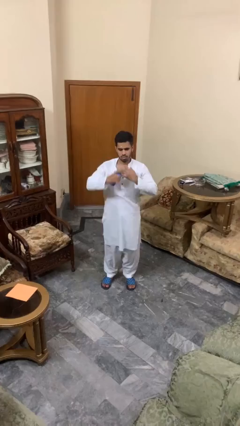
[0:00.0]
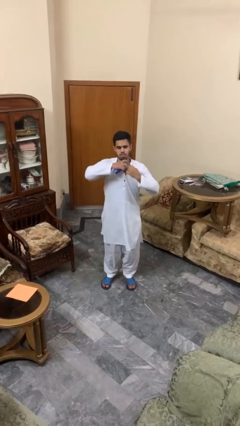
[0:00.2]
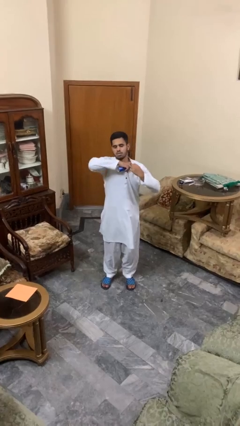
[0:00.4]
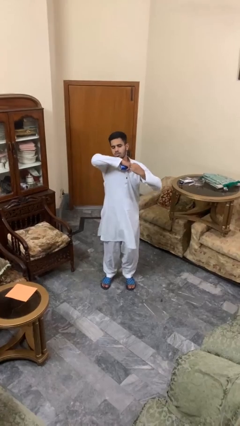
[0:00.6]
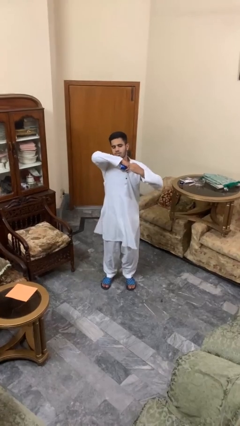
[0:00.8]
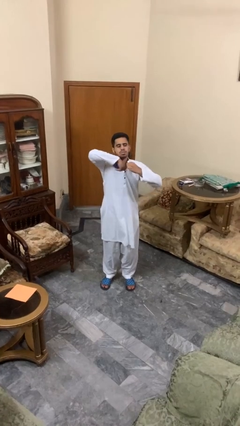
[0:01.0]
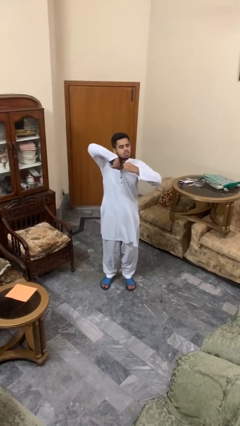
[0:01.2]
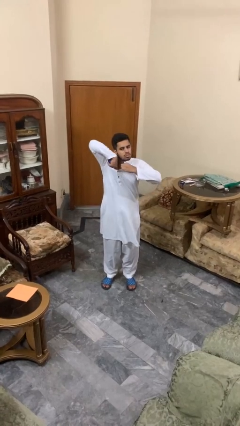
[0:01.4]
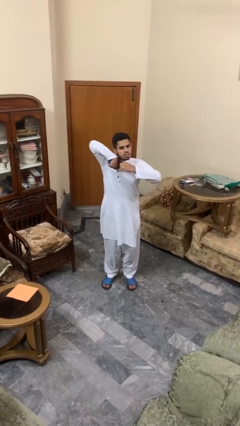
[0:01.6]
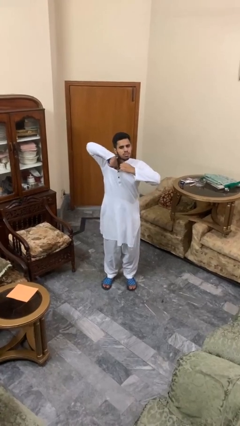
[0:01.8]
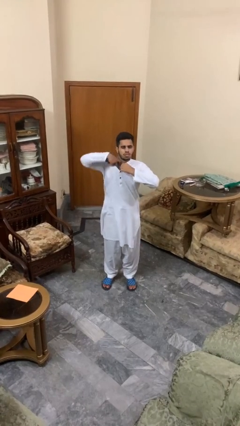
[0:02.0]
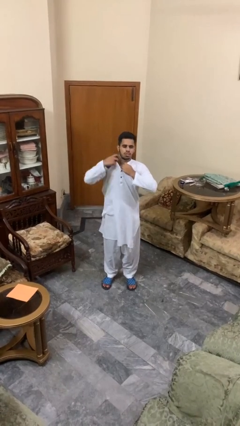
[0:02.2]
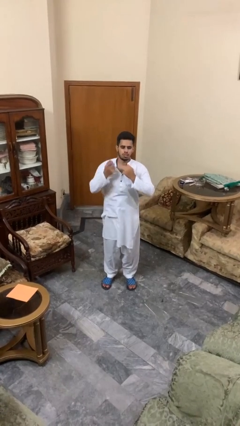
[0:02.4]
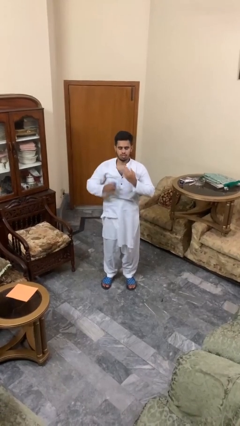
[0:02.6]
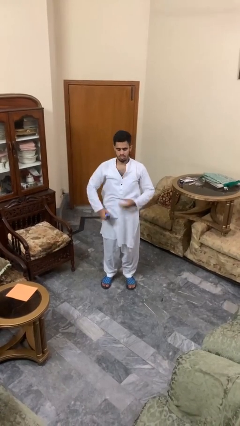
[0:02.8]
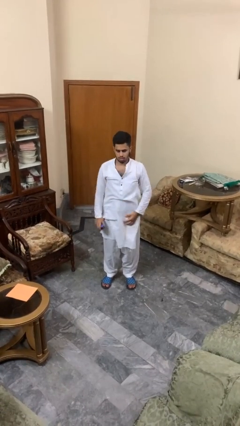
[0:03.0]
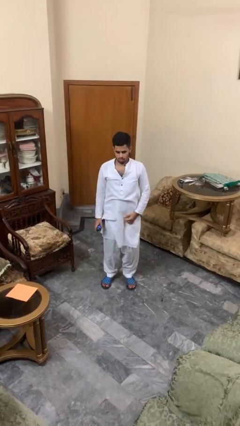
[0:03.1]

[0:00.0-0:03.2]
person applies deodorant

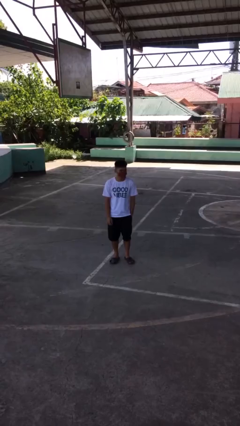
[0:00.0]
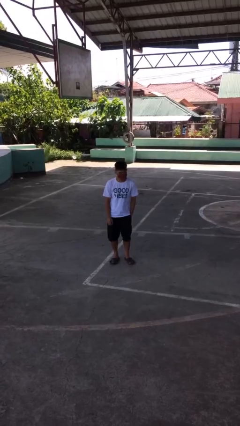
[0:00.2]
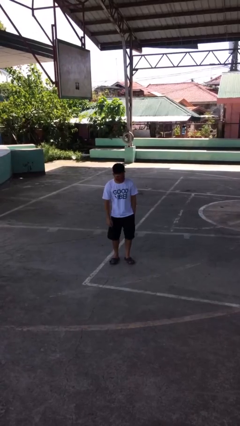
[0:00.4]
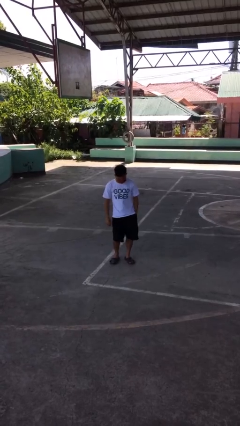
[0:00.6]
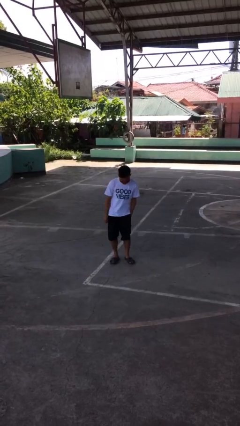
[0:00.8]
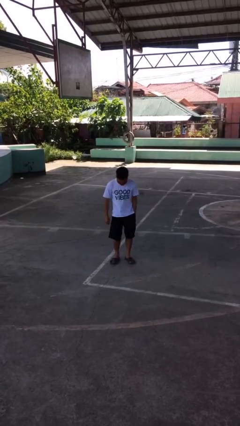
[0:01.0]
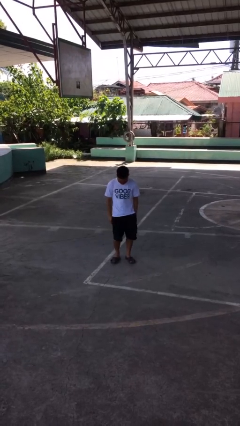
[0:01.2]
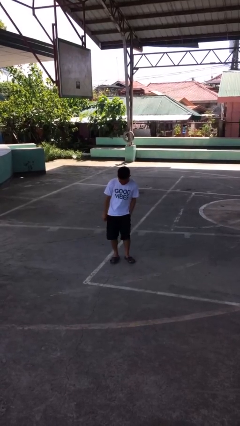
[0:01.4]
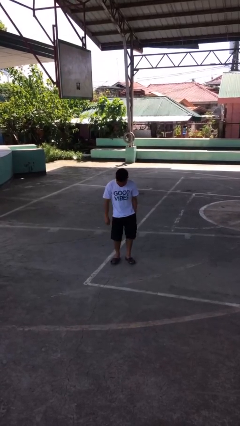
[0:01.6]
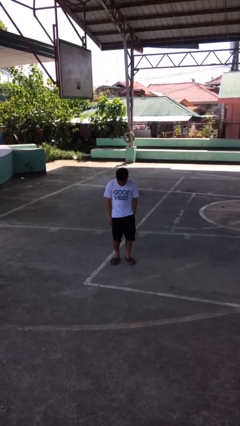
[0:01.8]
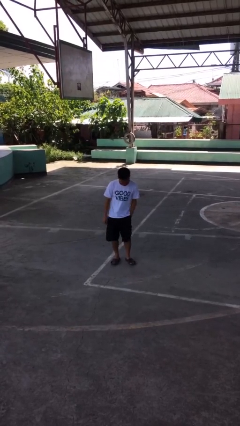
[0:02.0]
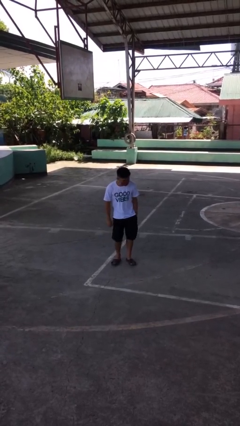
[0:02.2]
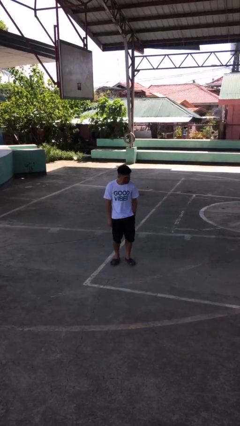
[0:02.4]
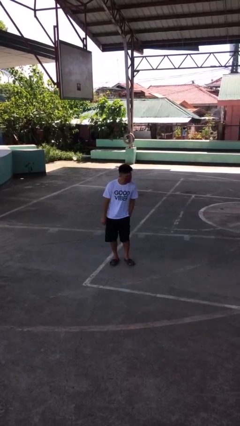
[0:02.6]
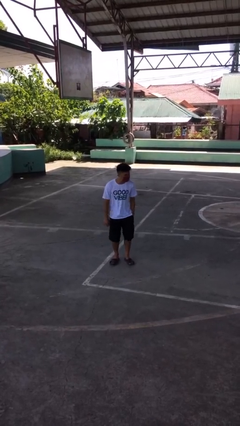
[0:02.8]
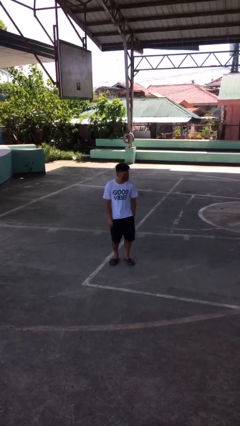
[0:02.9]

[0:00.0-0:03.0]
person wiggles hips

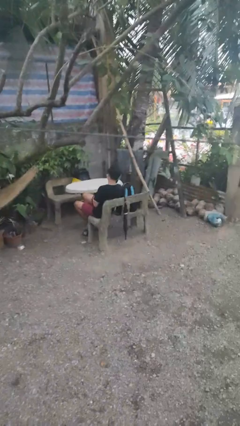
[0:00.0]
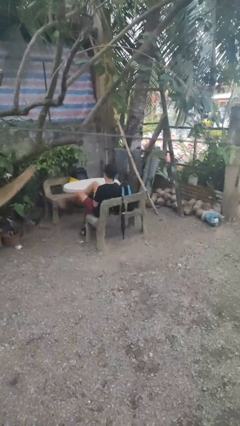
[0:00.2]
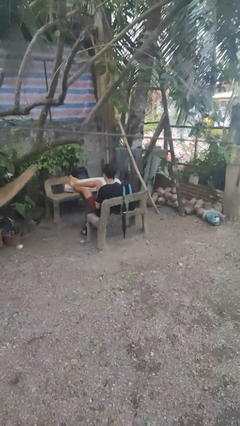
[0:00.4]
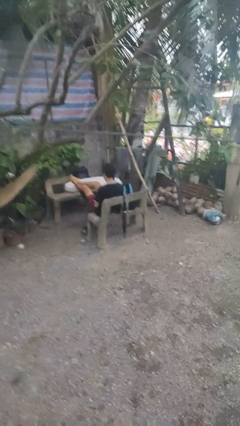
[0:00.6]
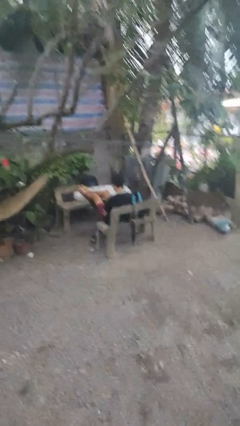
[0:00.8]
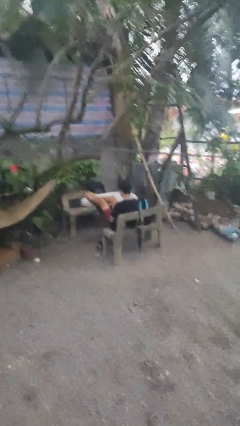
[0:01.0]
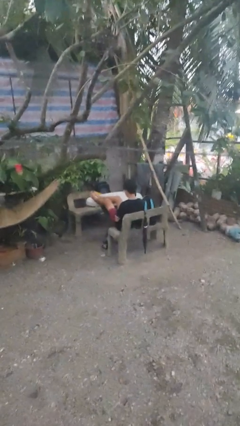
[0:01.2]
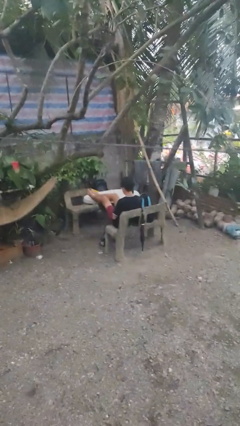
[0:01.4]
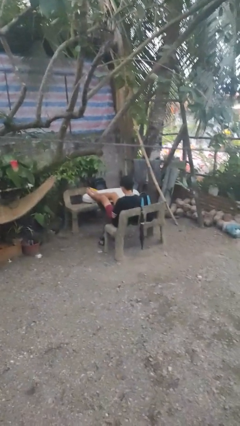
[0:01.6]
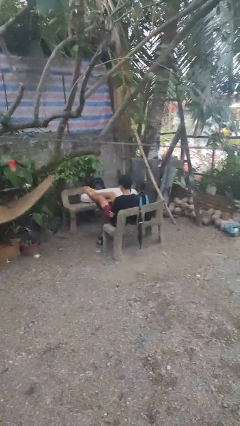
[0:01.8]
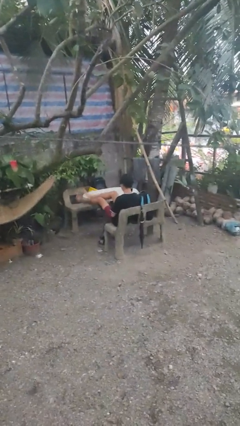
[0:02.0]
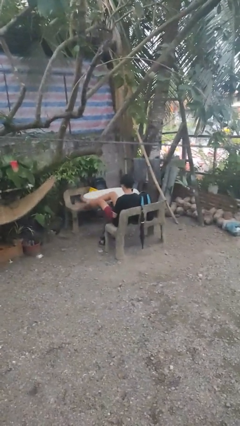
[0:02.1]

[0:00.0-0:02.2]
person puts feet up

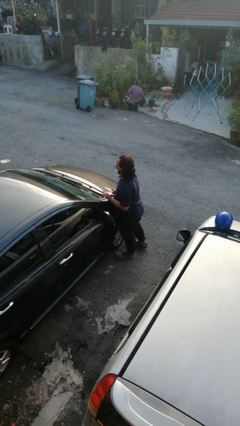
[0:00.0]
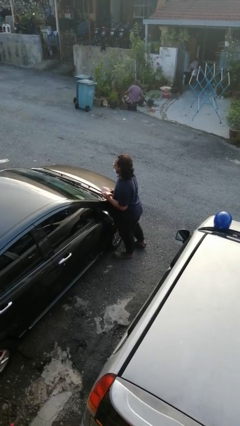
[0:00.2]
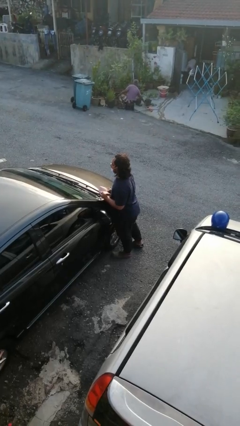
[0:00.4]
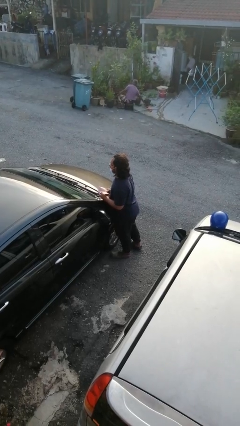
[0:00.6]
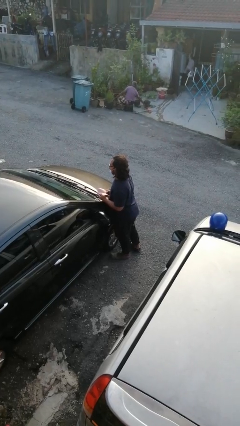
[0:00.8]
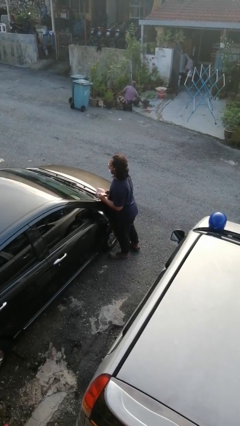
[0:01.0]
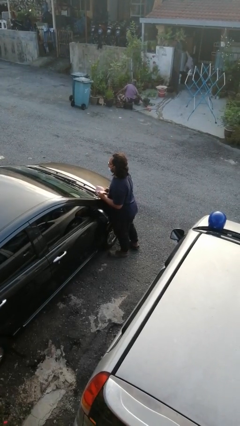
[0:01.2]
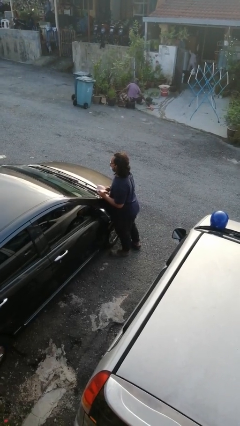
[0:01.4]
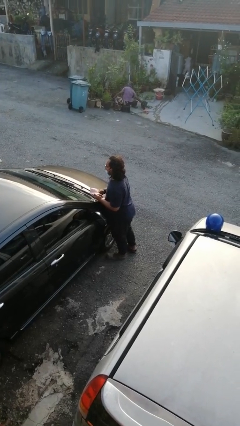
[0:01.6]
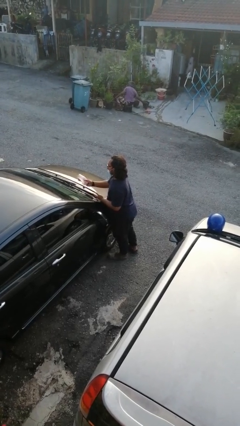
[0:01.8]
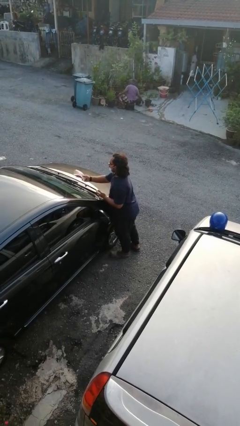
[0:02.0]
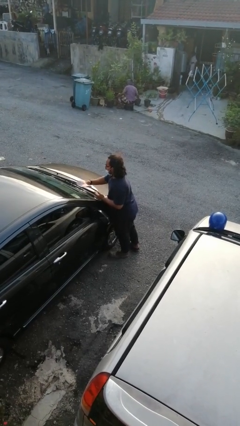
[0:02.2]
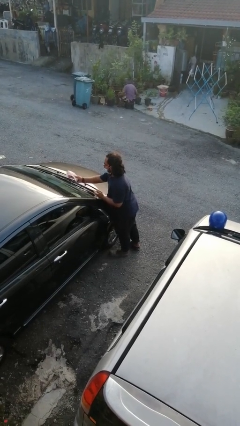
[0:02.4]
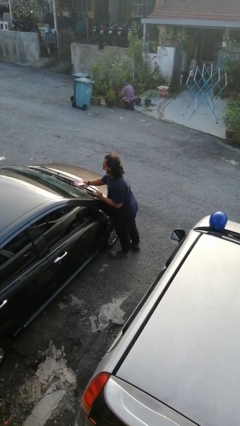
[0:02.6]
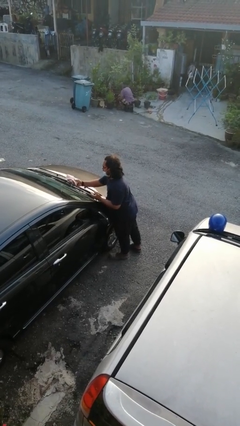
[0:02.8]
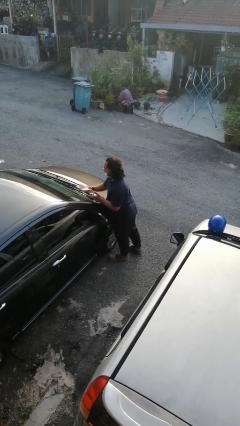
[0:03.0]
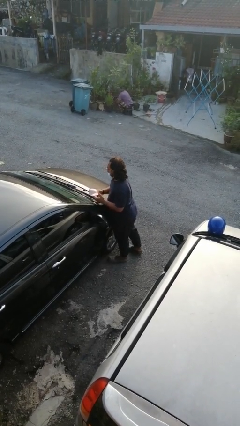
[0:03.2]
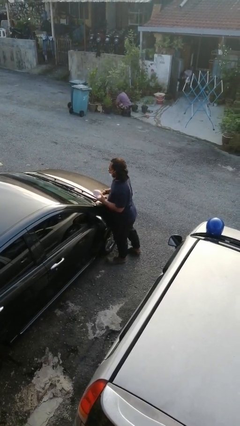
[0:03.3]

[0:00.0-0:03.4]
person polishes car with rag

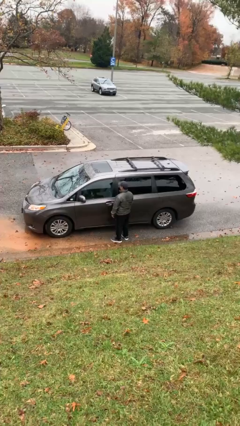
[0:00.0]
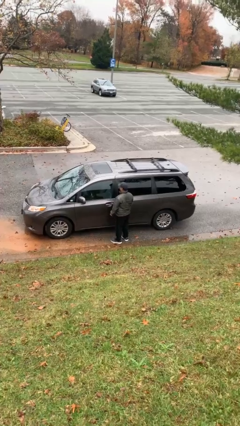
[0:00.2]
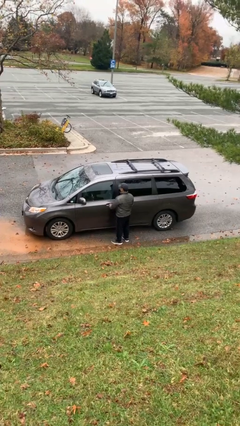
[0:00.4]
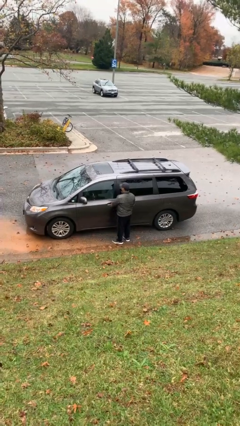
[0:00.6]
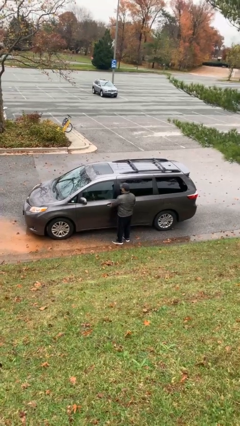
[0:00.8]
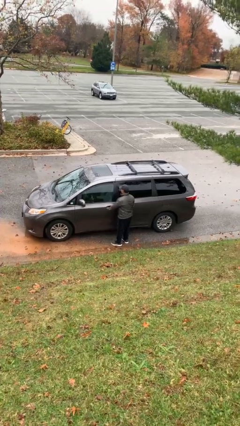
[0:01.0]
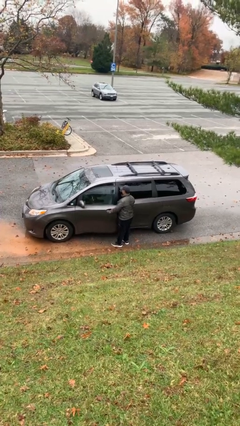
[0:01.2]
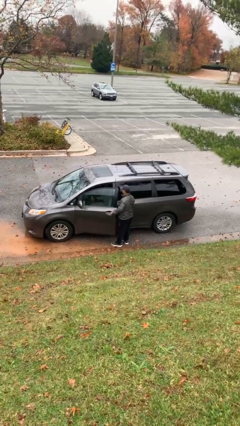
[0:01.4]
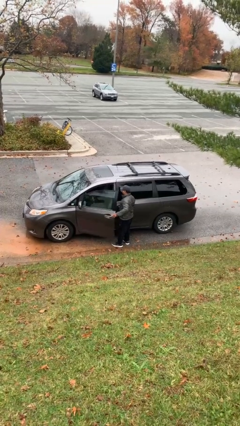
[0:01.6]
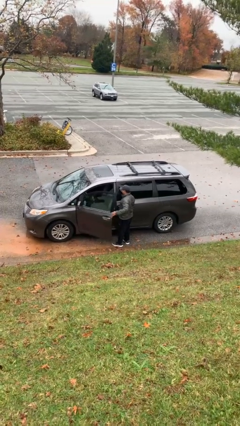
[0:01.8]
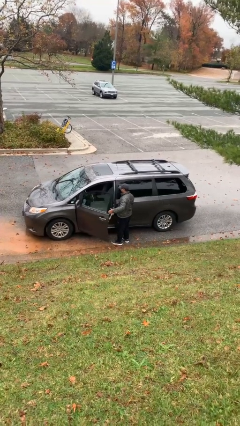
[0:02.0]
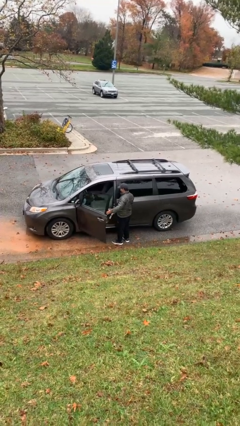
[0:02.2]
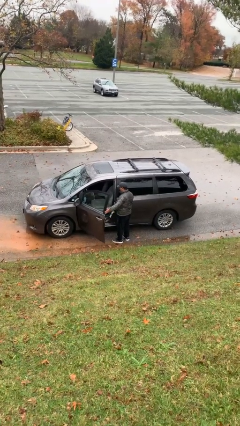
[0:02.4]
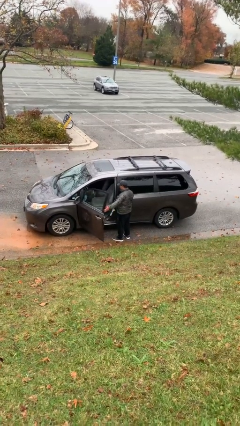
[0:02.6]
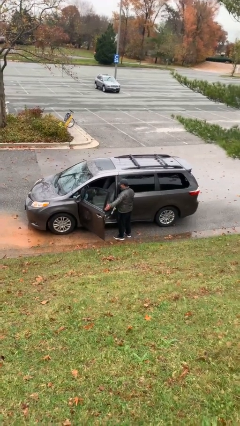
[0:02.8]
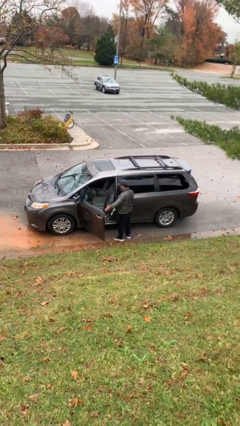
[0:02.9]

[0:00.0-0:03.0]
person opens car door

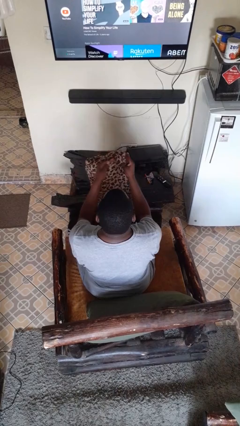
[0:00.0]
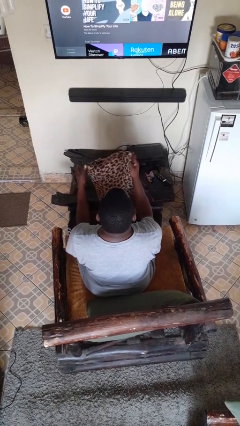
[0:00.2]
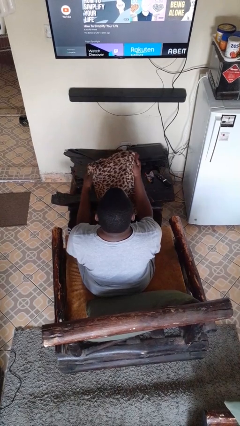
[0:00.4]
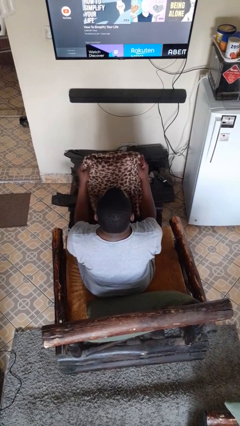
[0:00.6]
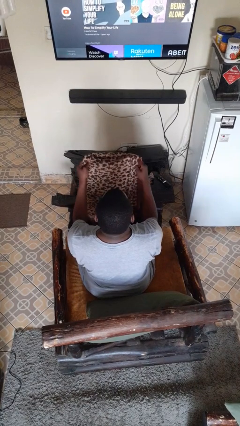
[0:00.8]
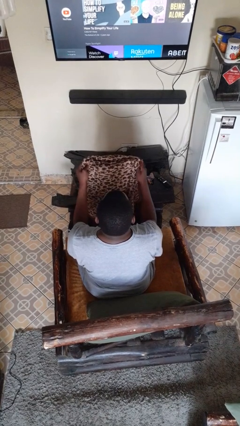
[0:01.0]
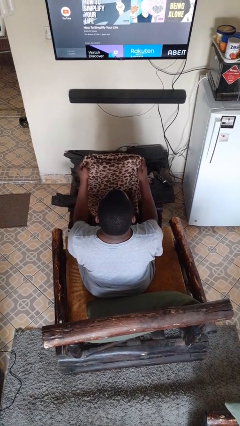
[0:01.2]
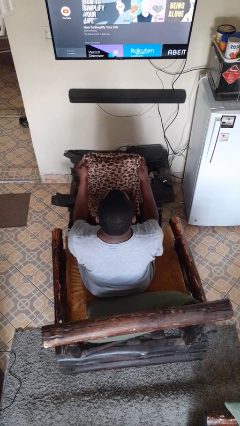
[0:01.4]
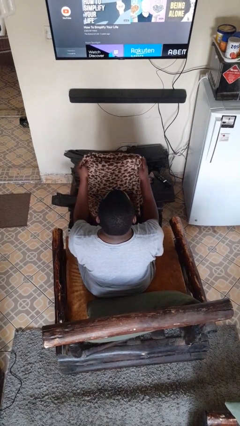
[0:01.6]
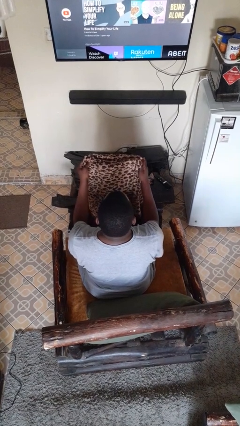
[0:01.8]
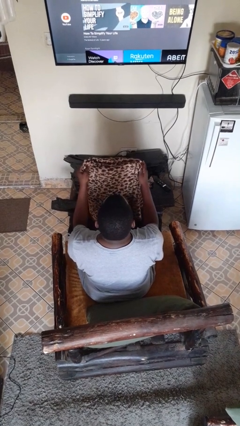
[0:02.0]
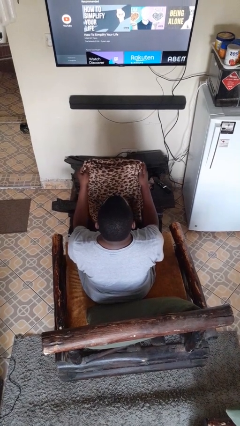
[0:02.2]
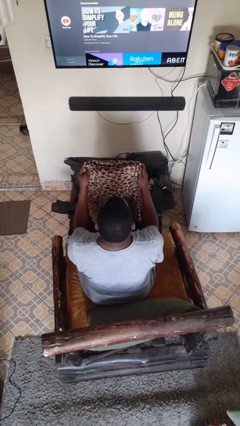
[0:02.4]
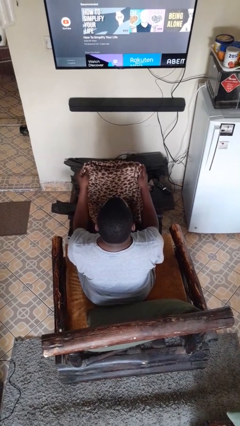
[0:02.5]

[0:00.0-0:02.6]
person folds blanket
